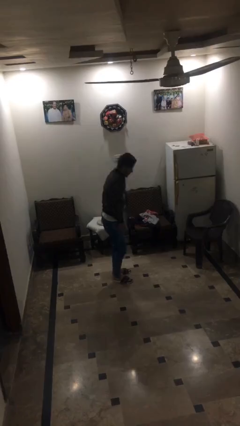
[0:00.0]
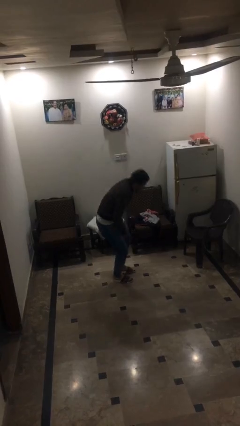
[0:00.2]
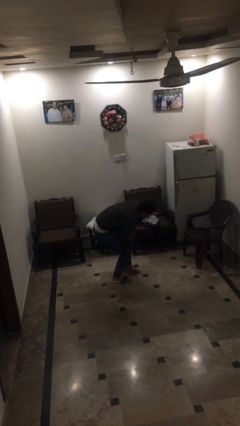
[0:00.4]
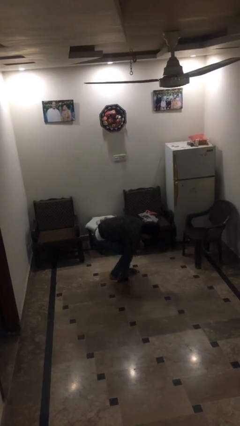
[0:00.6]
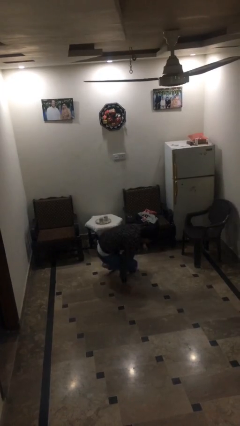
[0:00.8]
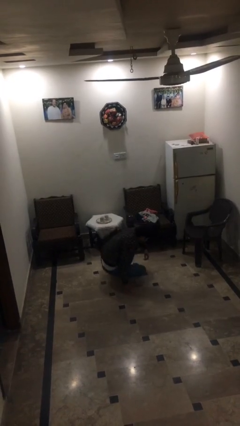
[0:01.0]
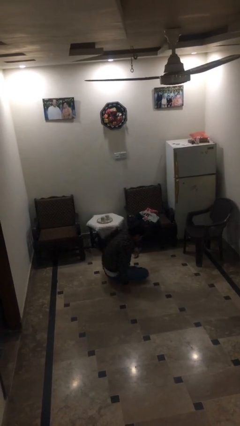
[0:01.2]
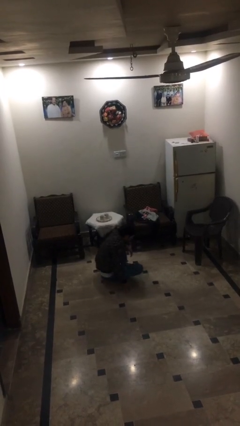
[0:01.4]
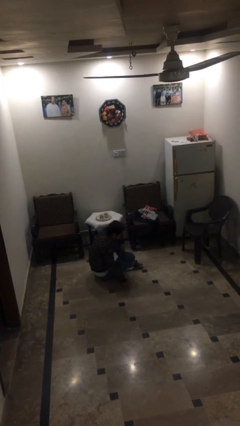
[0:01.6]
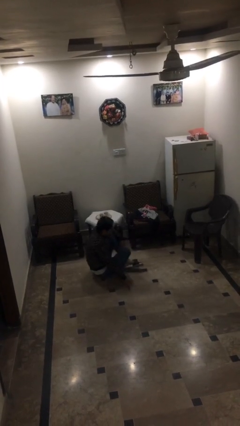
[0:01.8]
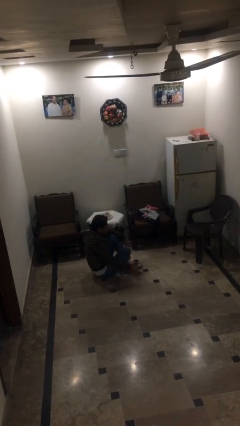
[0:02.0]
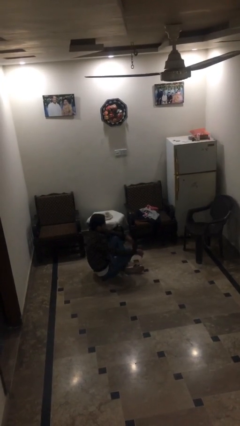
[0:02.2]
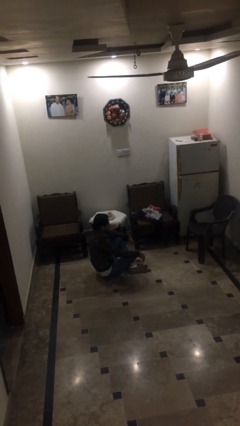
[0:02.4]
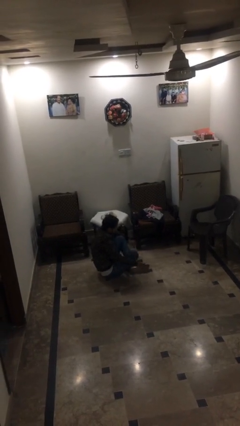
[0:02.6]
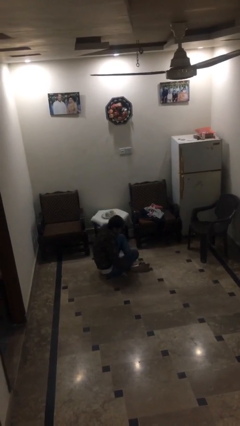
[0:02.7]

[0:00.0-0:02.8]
person sits down

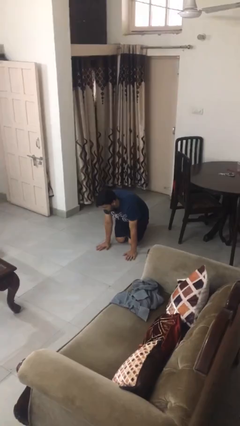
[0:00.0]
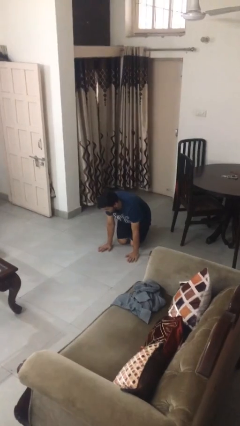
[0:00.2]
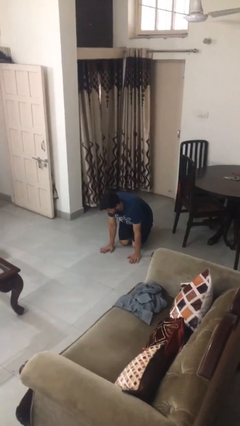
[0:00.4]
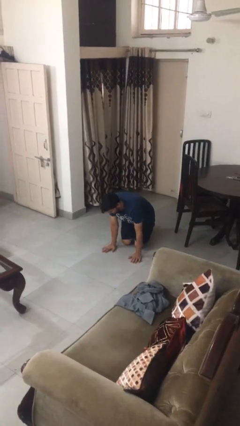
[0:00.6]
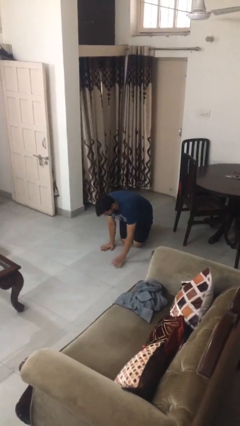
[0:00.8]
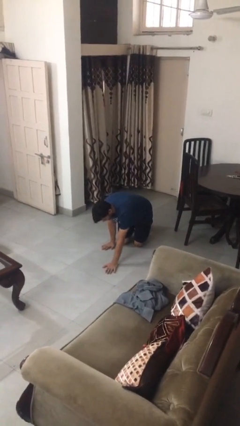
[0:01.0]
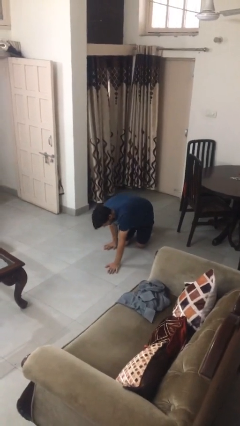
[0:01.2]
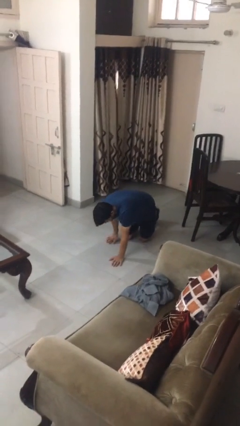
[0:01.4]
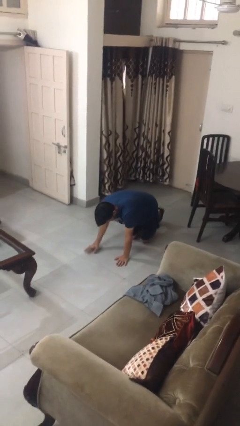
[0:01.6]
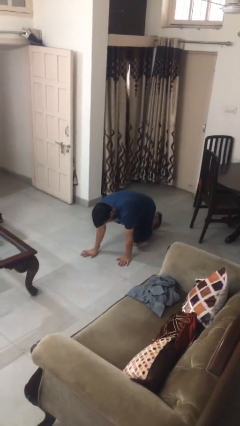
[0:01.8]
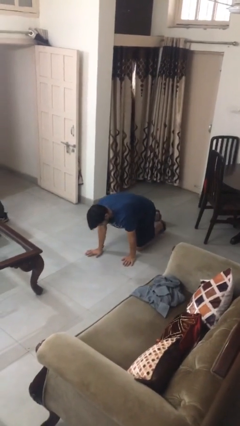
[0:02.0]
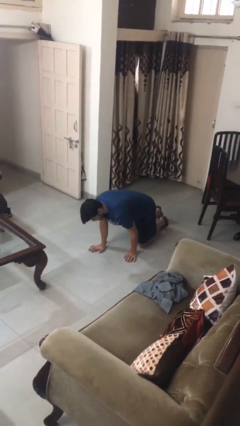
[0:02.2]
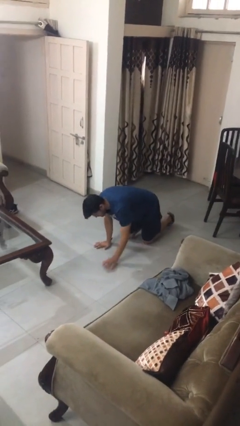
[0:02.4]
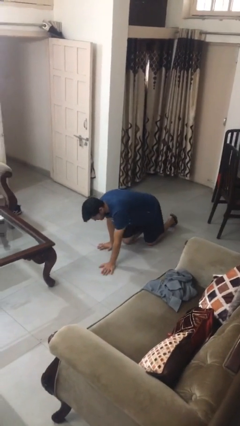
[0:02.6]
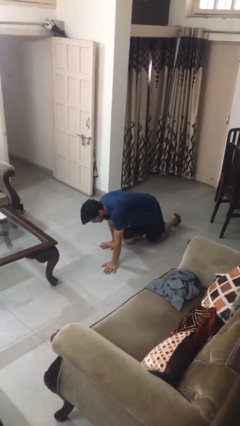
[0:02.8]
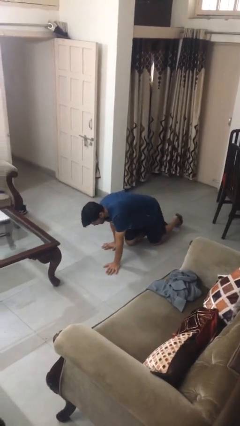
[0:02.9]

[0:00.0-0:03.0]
person crawls

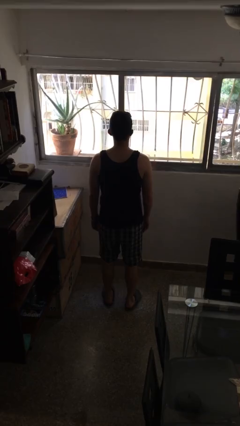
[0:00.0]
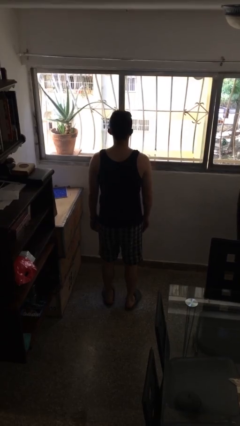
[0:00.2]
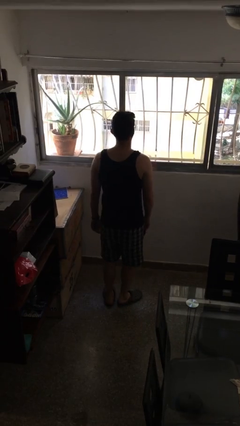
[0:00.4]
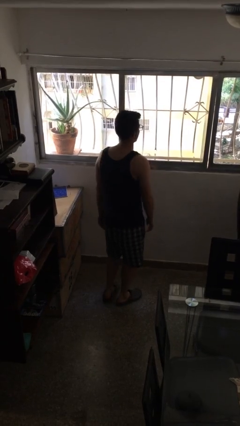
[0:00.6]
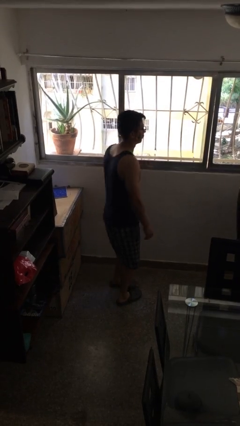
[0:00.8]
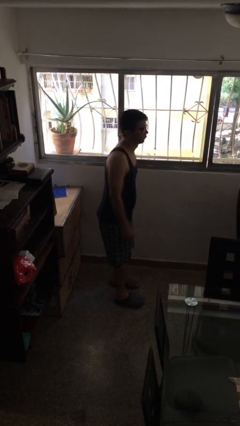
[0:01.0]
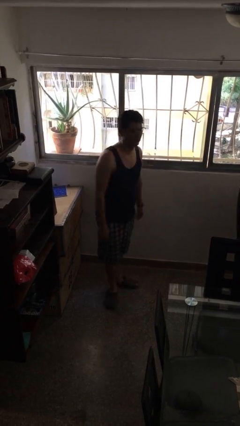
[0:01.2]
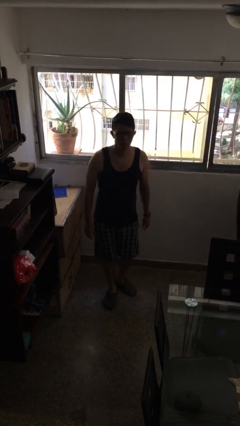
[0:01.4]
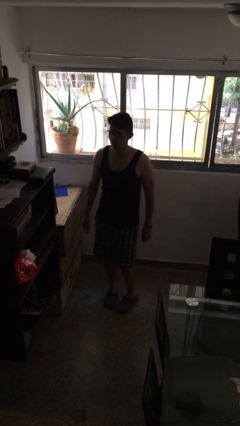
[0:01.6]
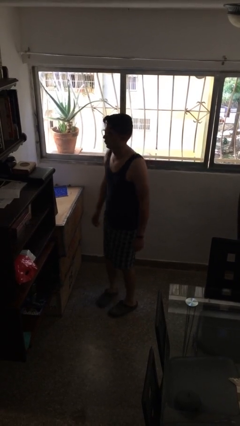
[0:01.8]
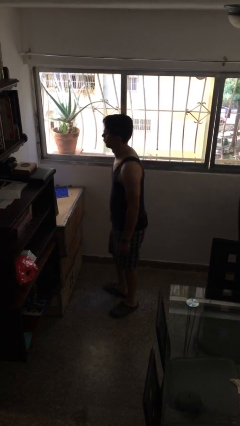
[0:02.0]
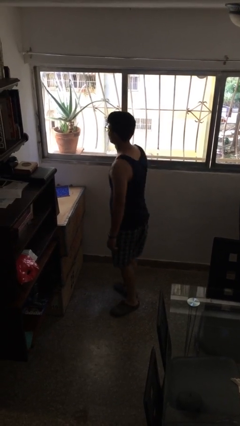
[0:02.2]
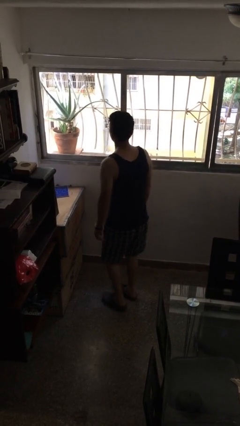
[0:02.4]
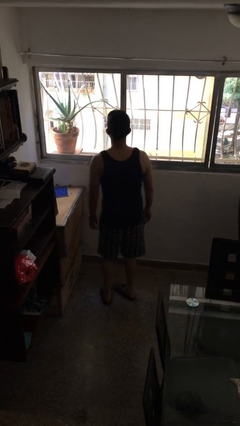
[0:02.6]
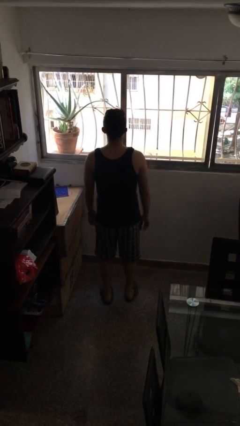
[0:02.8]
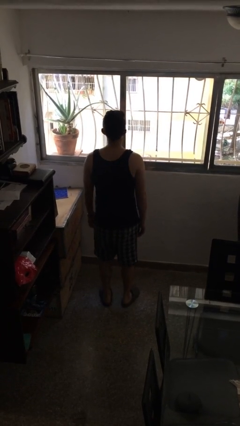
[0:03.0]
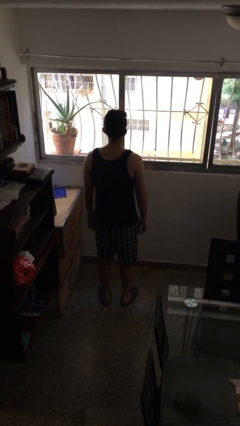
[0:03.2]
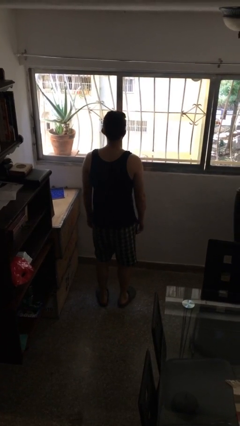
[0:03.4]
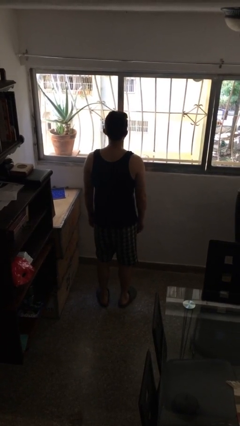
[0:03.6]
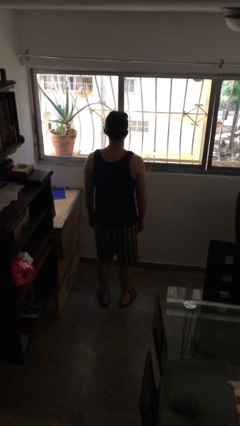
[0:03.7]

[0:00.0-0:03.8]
person twirls

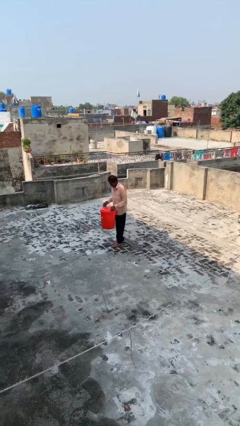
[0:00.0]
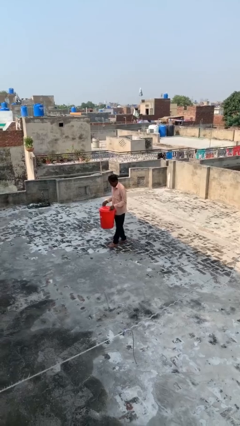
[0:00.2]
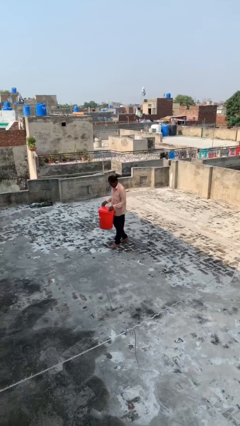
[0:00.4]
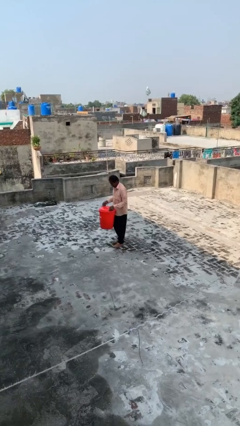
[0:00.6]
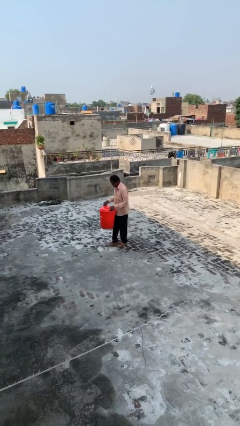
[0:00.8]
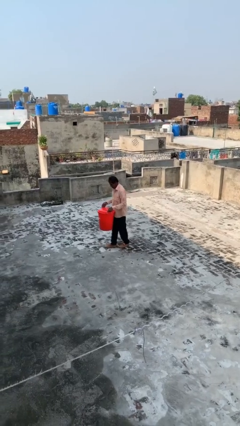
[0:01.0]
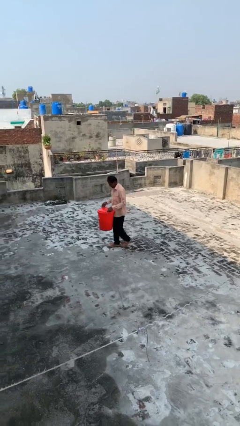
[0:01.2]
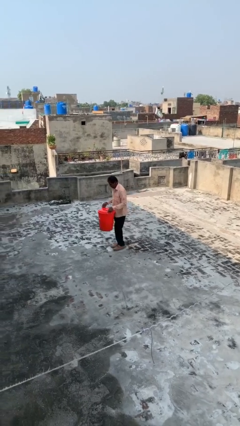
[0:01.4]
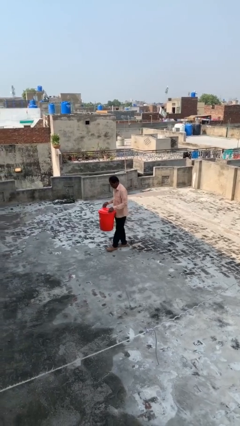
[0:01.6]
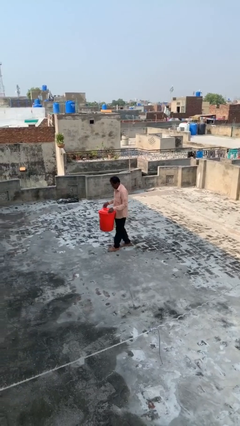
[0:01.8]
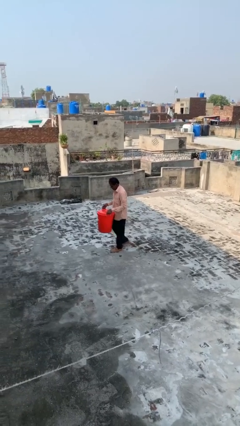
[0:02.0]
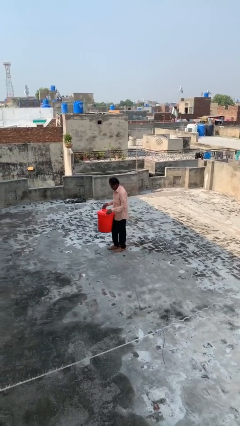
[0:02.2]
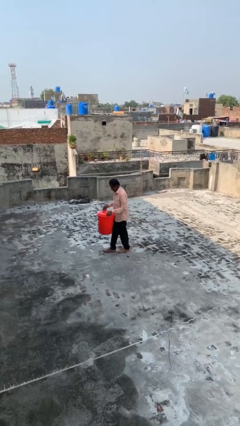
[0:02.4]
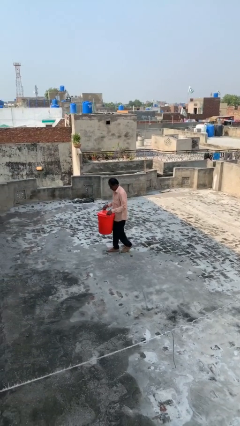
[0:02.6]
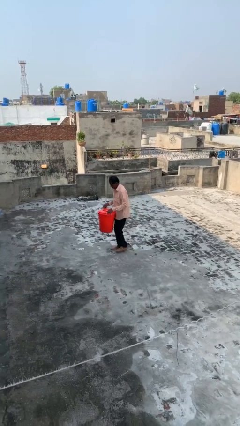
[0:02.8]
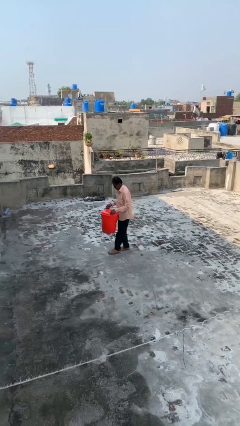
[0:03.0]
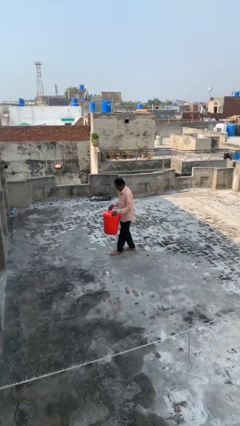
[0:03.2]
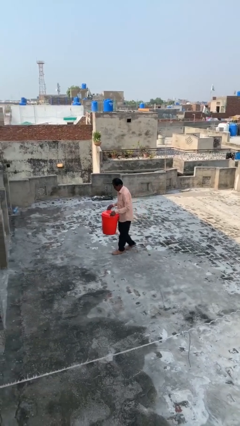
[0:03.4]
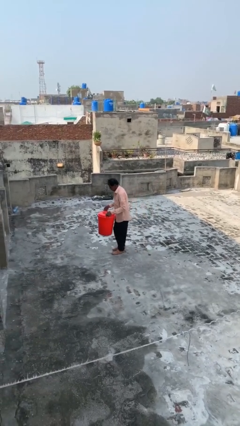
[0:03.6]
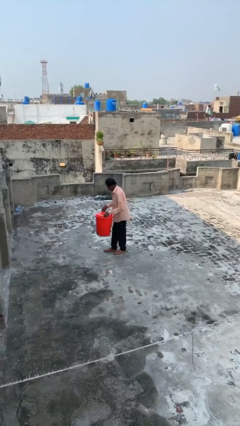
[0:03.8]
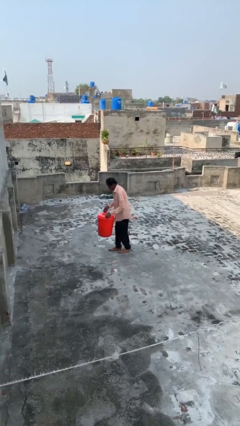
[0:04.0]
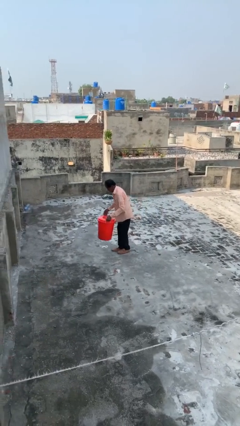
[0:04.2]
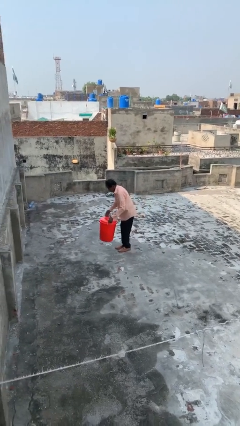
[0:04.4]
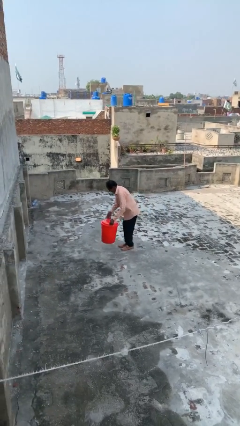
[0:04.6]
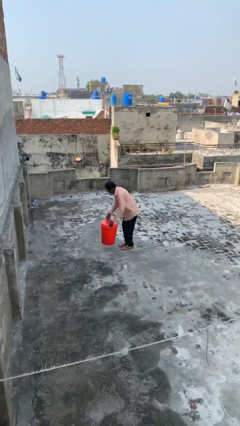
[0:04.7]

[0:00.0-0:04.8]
person carries heavy object

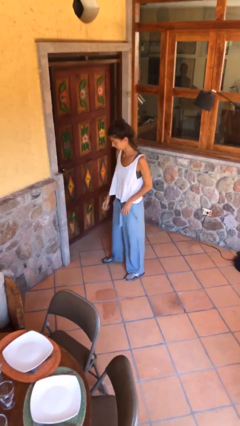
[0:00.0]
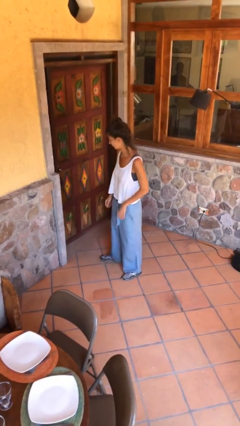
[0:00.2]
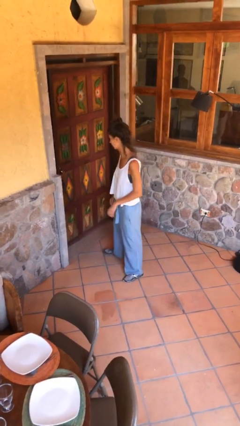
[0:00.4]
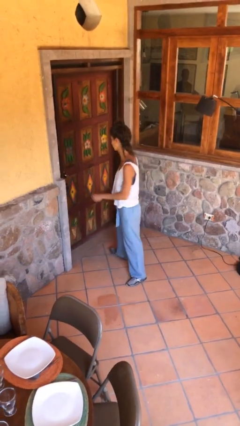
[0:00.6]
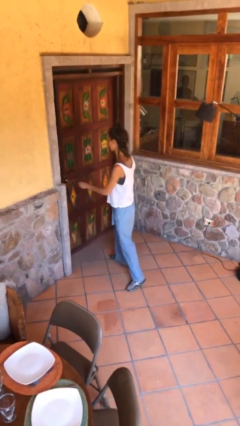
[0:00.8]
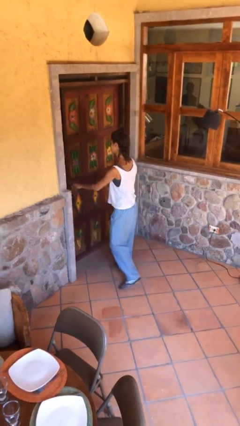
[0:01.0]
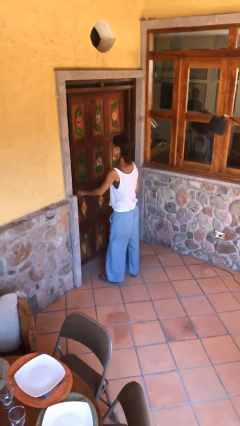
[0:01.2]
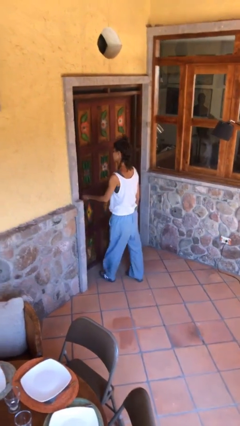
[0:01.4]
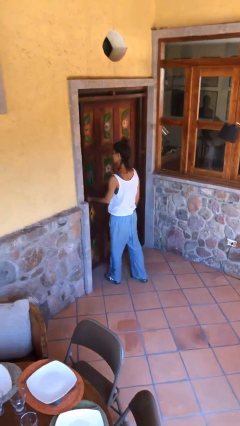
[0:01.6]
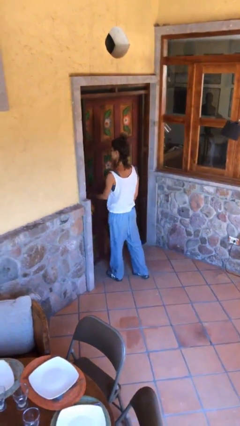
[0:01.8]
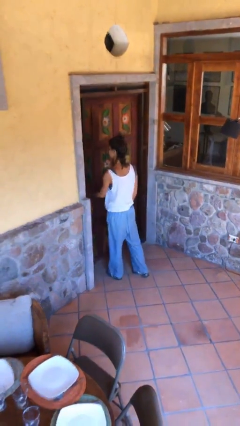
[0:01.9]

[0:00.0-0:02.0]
person opens facility door

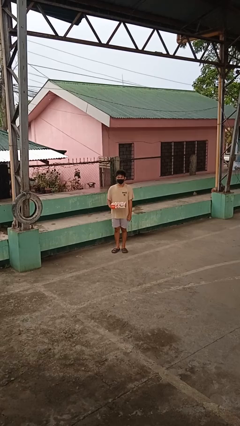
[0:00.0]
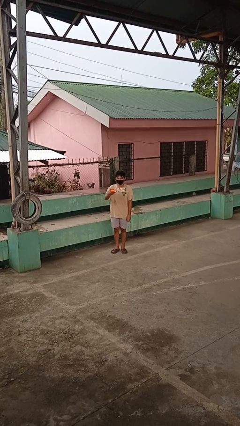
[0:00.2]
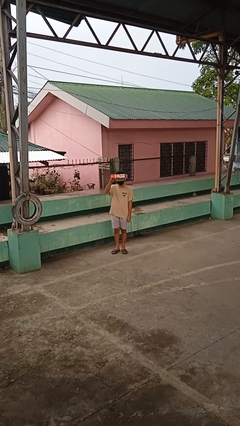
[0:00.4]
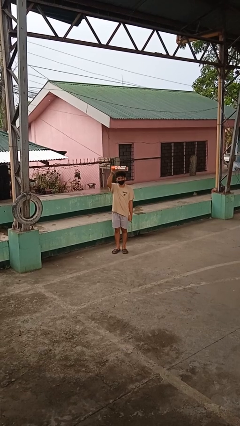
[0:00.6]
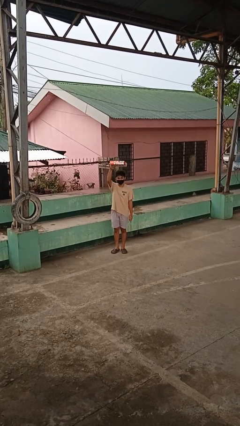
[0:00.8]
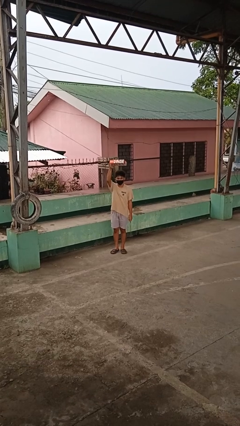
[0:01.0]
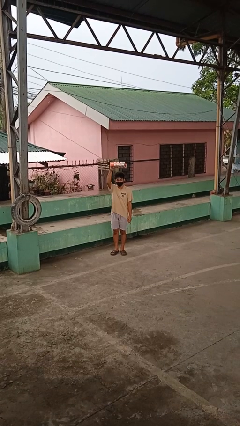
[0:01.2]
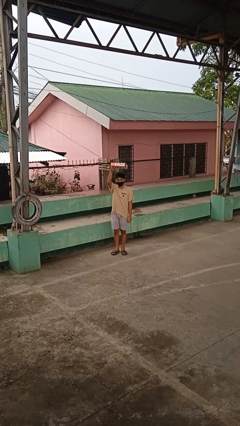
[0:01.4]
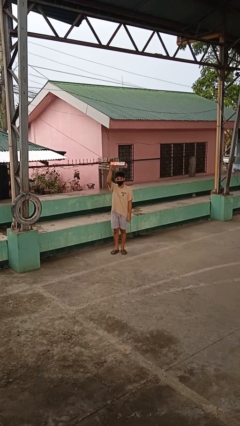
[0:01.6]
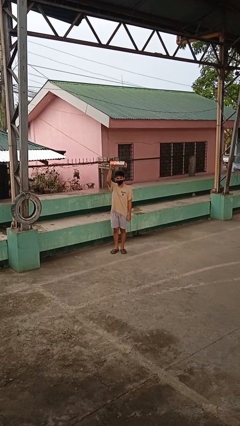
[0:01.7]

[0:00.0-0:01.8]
person holds object above head
